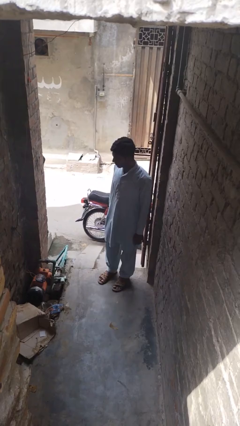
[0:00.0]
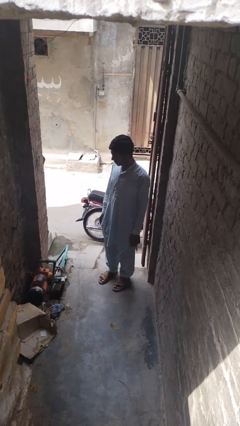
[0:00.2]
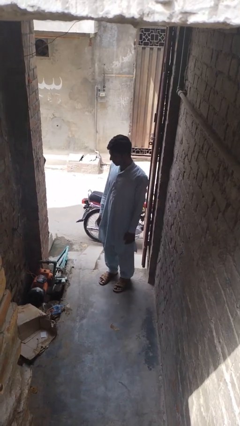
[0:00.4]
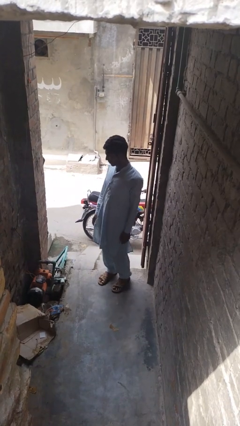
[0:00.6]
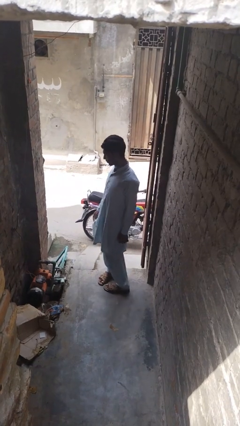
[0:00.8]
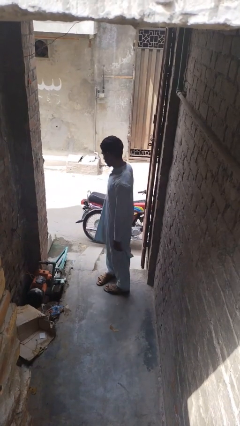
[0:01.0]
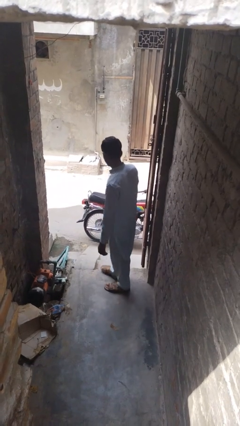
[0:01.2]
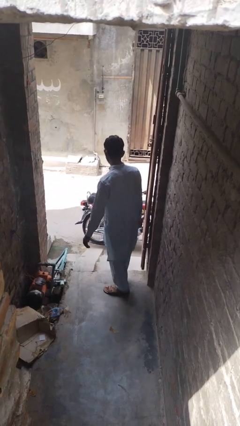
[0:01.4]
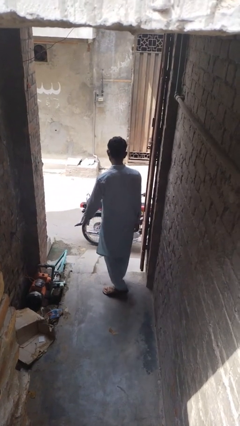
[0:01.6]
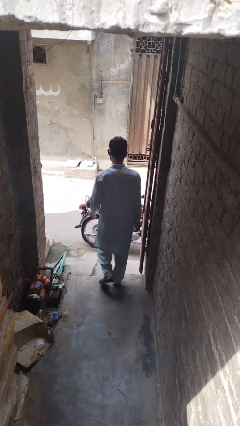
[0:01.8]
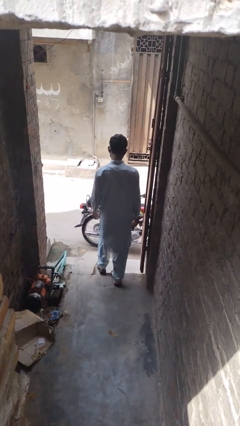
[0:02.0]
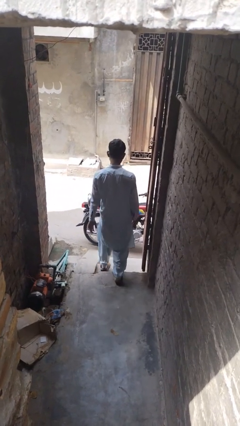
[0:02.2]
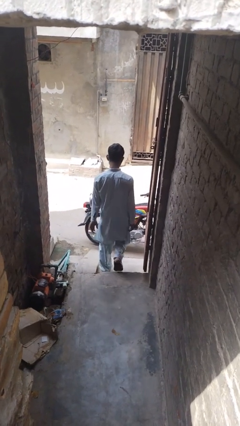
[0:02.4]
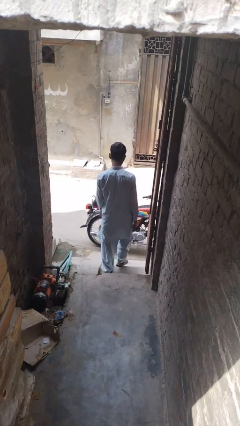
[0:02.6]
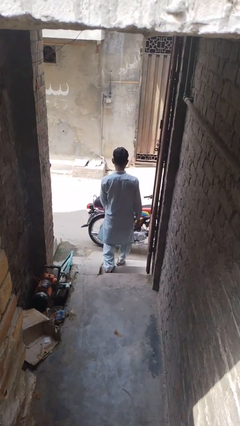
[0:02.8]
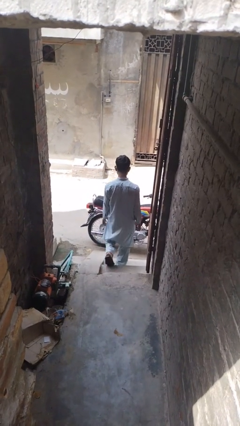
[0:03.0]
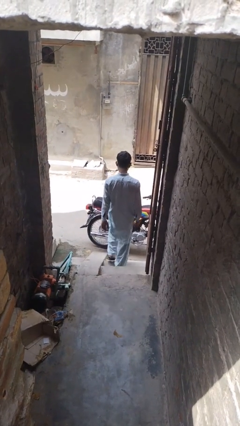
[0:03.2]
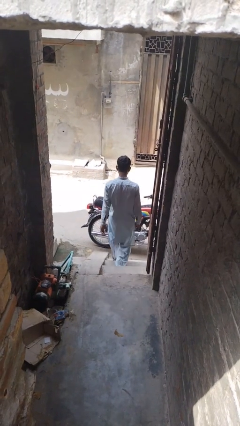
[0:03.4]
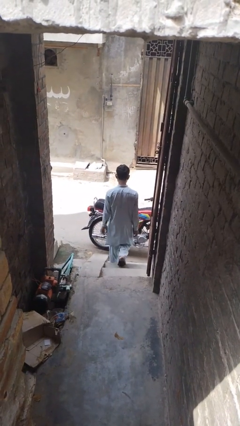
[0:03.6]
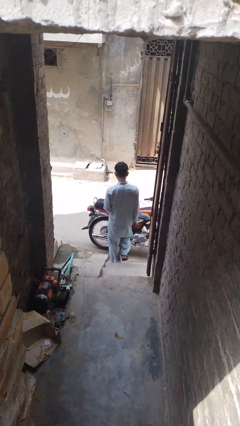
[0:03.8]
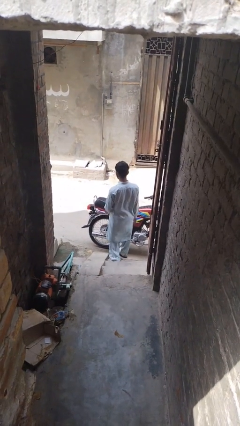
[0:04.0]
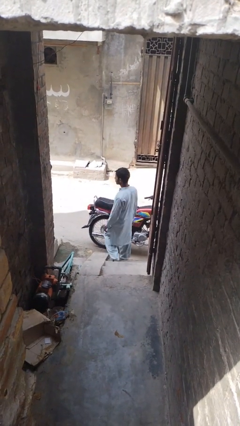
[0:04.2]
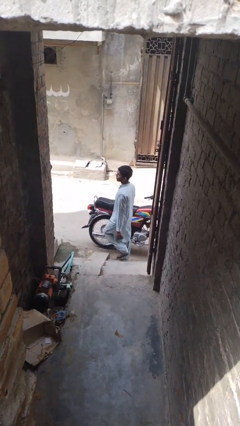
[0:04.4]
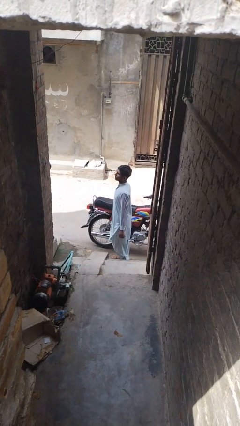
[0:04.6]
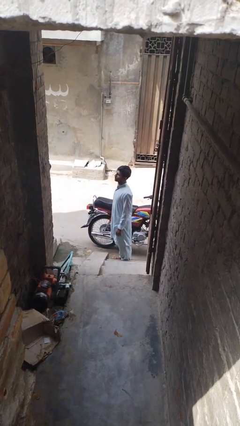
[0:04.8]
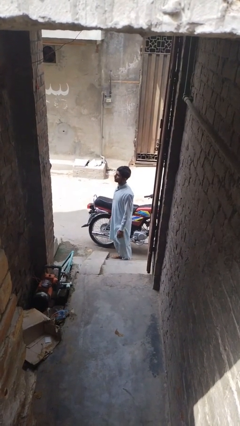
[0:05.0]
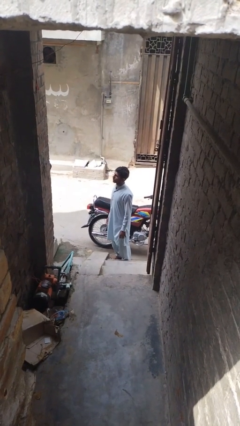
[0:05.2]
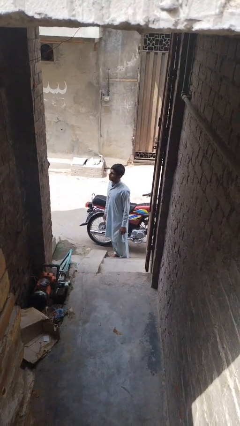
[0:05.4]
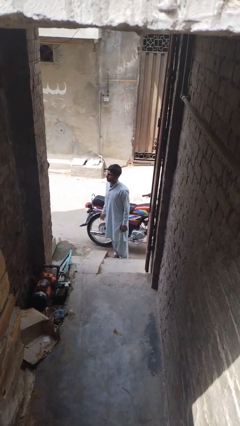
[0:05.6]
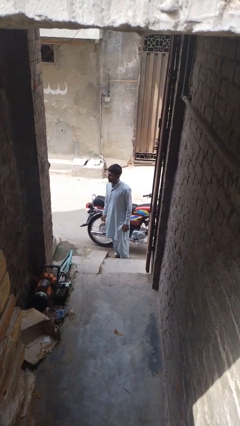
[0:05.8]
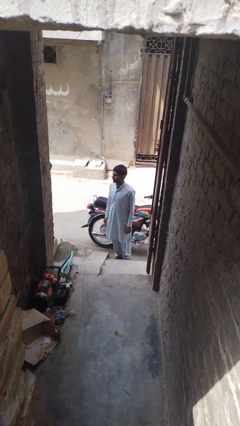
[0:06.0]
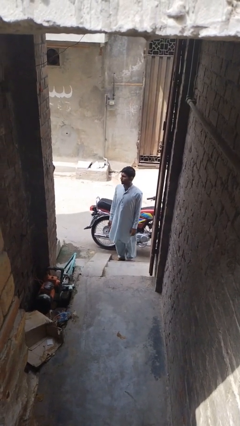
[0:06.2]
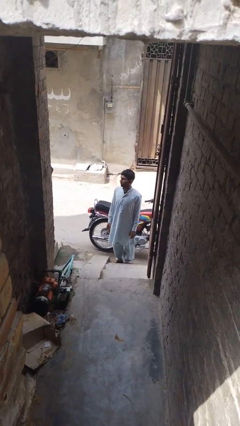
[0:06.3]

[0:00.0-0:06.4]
person climbs down stairs

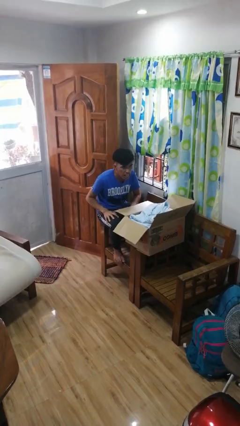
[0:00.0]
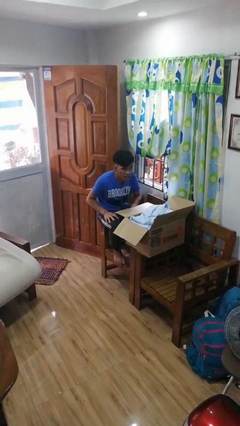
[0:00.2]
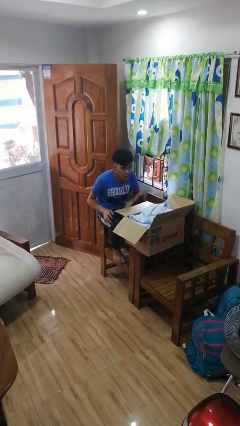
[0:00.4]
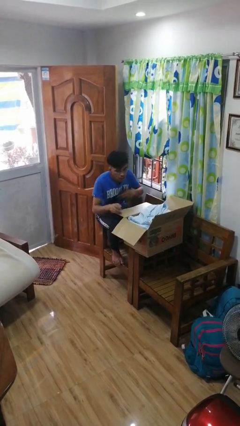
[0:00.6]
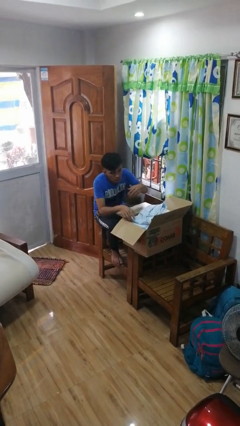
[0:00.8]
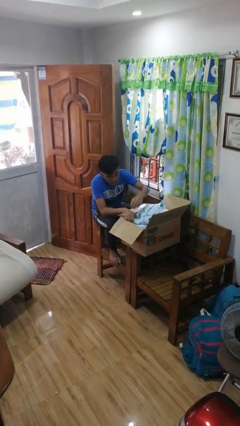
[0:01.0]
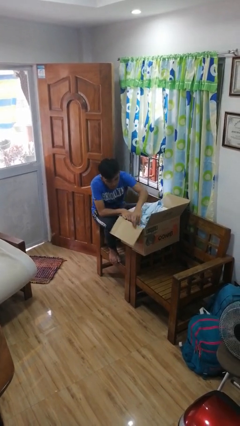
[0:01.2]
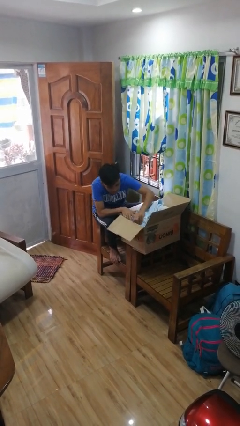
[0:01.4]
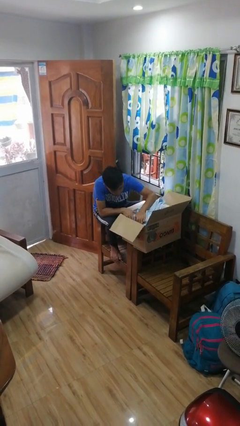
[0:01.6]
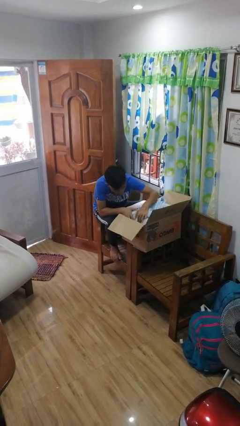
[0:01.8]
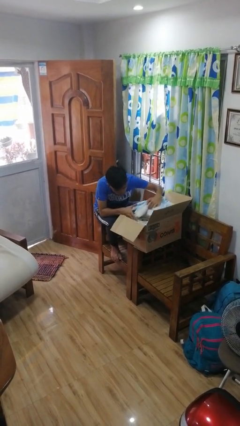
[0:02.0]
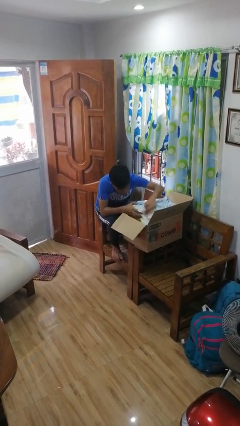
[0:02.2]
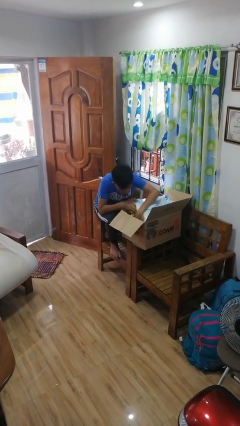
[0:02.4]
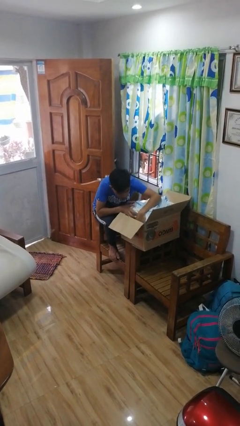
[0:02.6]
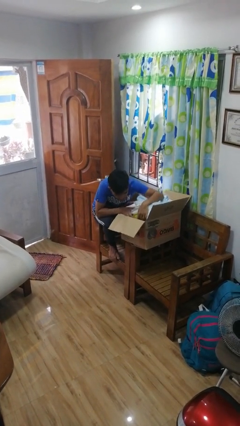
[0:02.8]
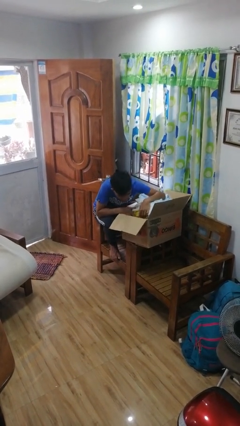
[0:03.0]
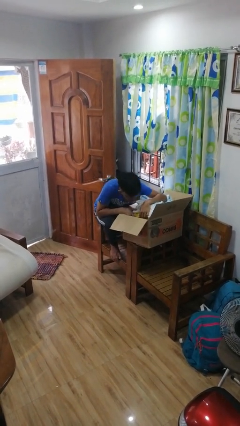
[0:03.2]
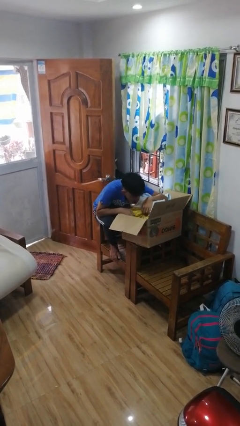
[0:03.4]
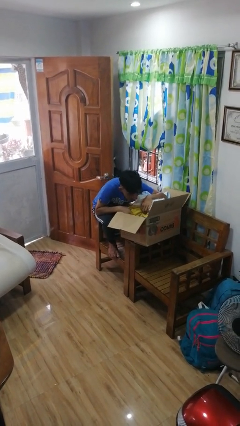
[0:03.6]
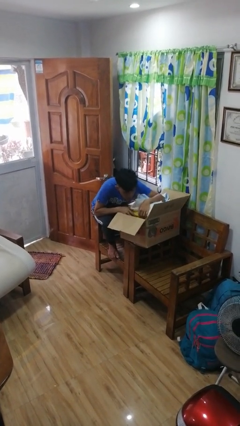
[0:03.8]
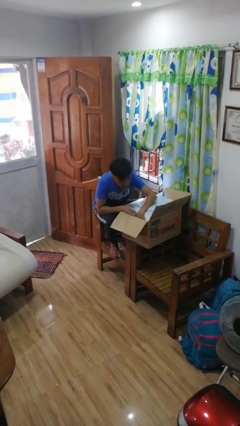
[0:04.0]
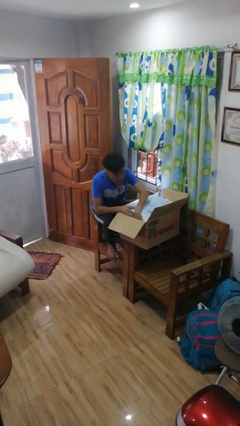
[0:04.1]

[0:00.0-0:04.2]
person searches in box

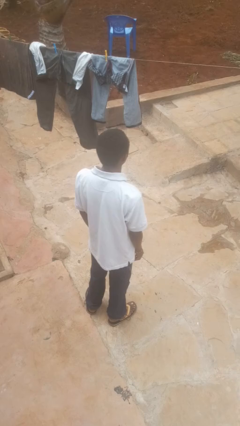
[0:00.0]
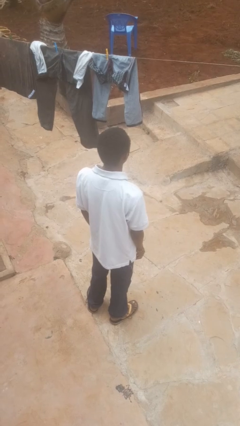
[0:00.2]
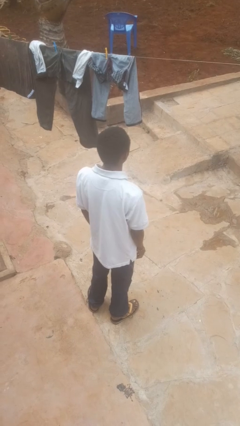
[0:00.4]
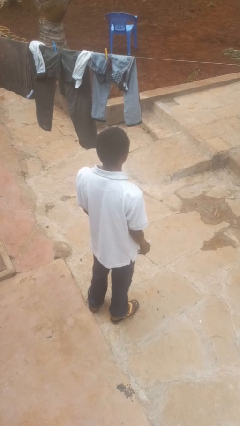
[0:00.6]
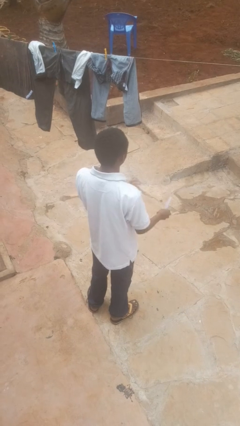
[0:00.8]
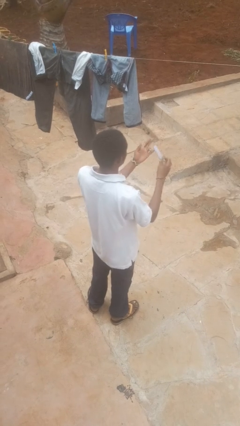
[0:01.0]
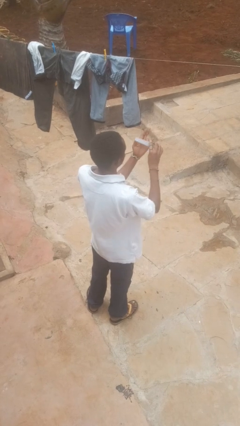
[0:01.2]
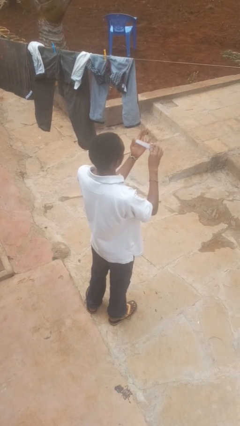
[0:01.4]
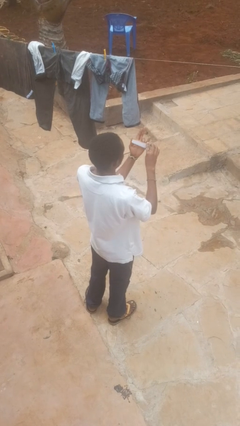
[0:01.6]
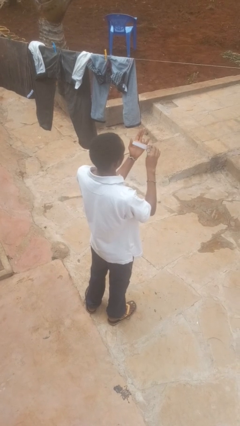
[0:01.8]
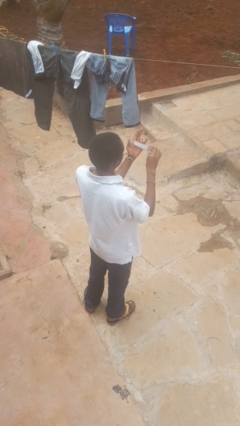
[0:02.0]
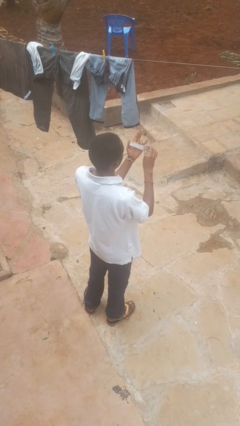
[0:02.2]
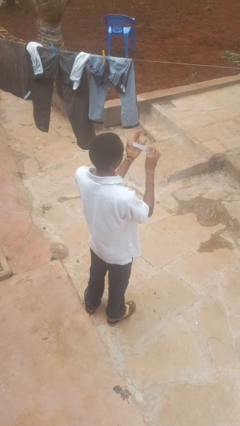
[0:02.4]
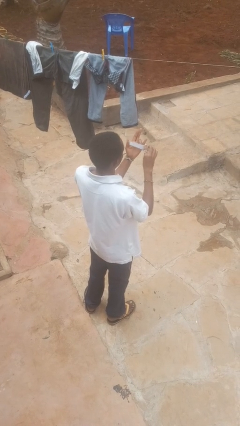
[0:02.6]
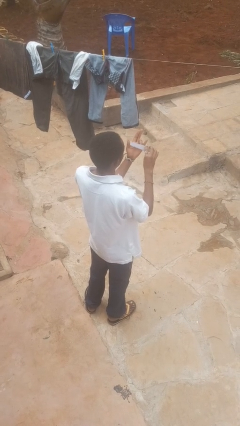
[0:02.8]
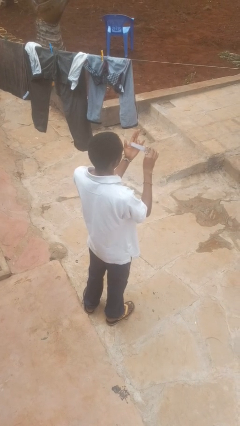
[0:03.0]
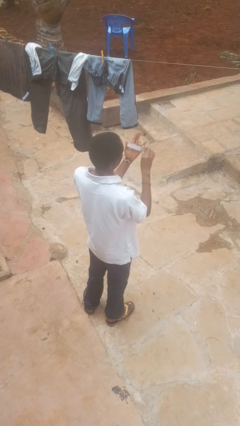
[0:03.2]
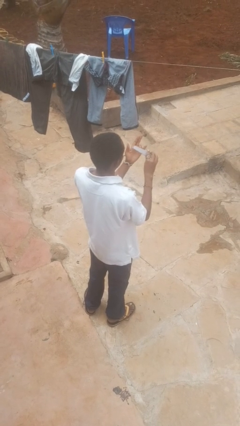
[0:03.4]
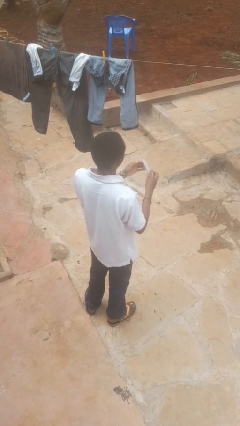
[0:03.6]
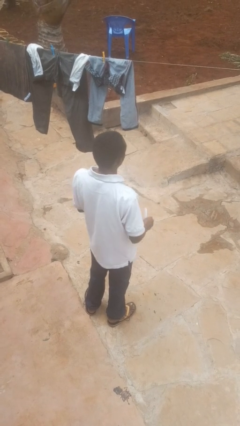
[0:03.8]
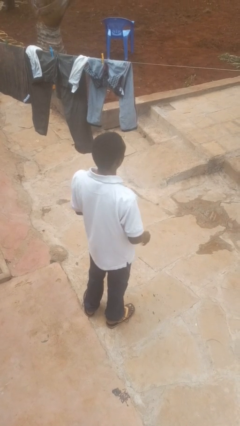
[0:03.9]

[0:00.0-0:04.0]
person files fingernails

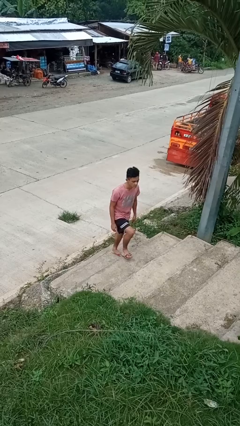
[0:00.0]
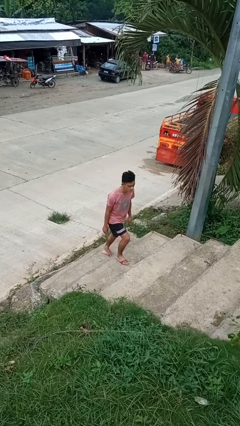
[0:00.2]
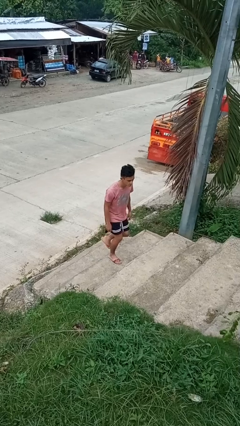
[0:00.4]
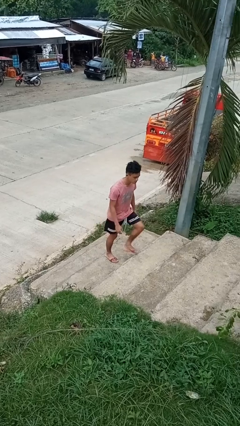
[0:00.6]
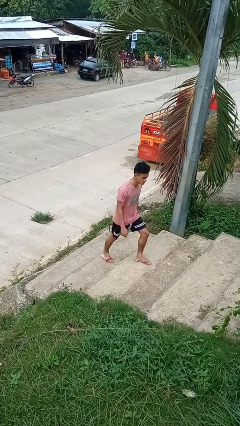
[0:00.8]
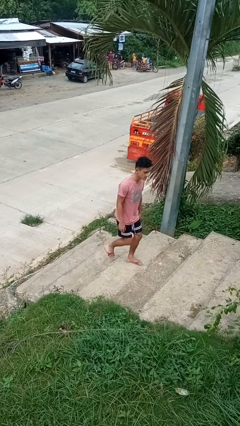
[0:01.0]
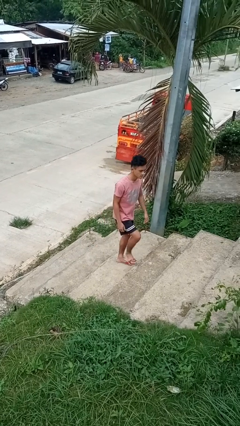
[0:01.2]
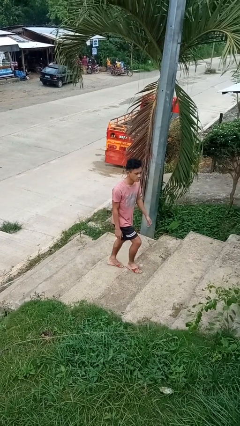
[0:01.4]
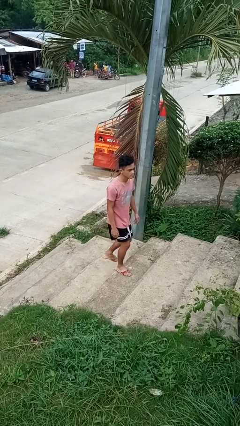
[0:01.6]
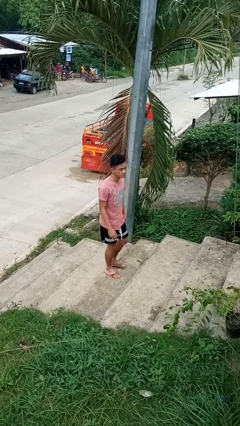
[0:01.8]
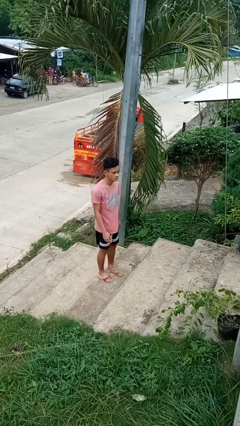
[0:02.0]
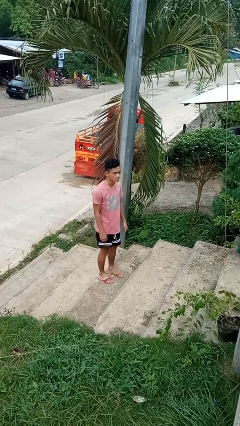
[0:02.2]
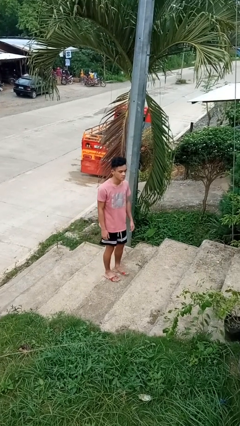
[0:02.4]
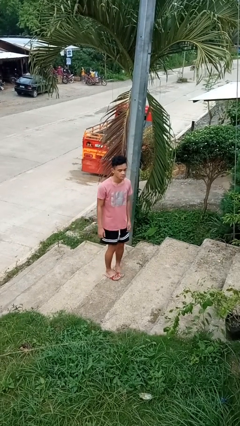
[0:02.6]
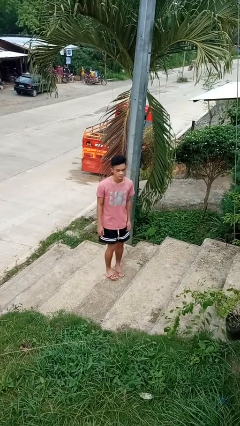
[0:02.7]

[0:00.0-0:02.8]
person climbs up stairs

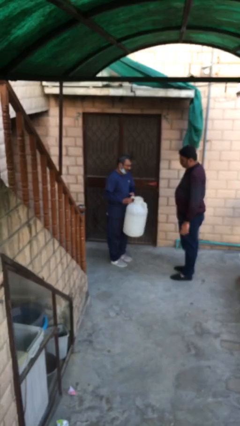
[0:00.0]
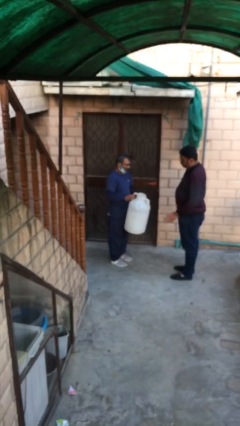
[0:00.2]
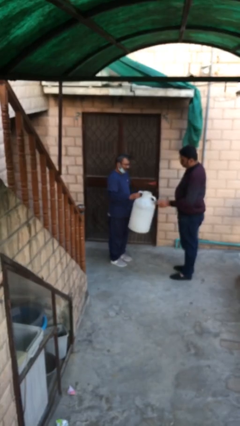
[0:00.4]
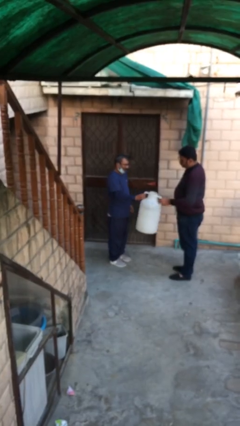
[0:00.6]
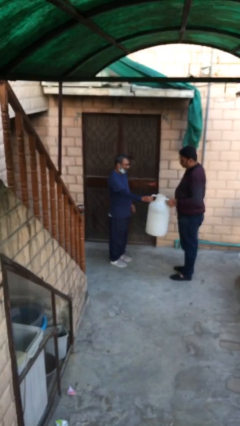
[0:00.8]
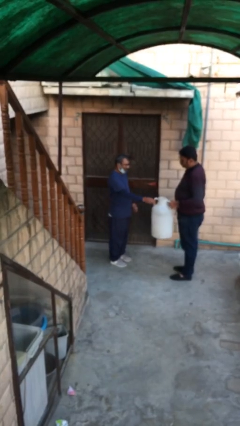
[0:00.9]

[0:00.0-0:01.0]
person transfers object to person
